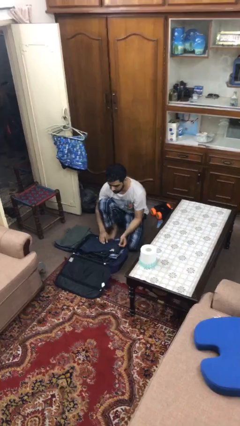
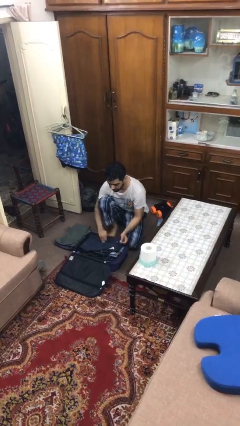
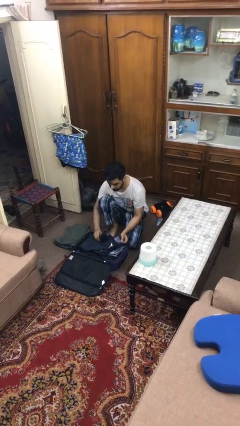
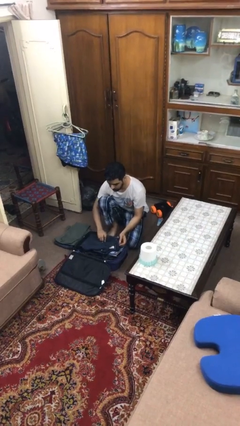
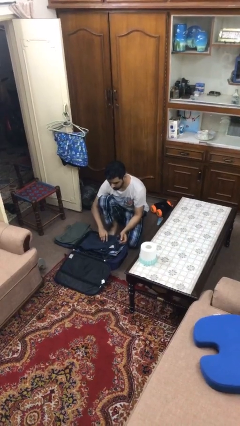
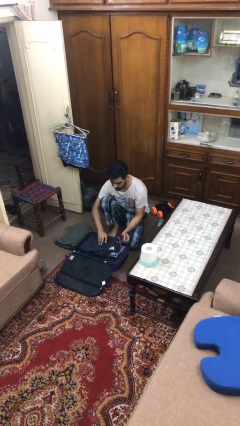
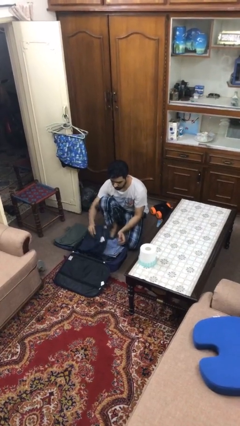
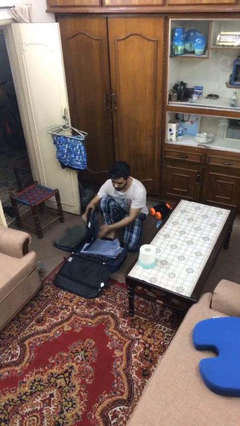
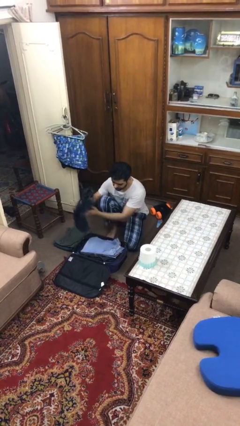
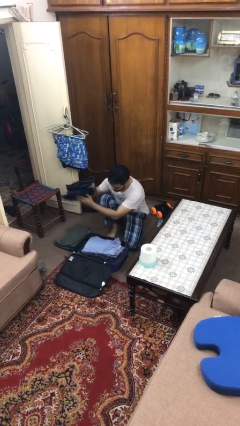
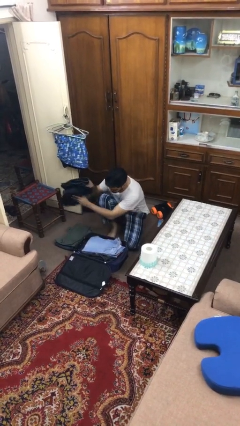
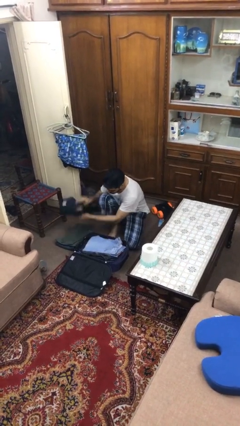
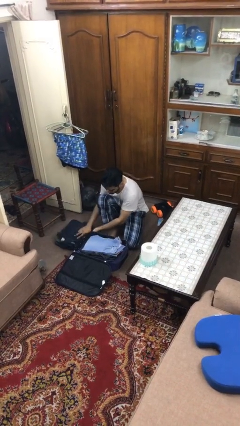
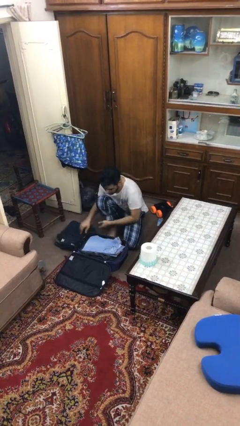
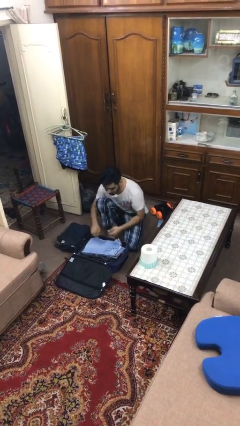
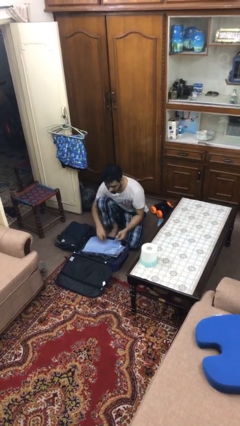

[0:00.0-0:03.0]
person unloads clothes from suitcase

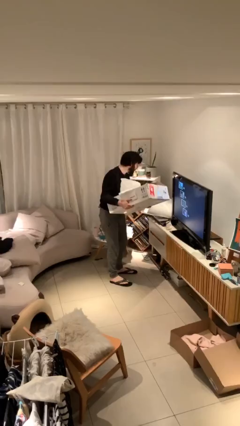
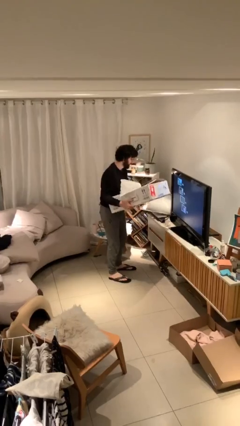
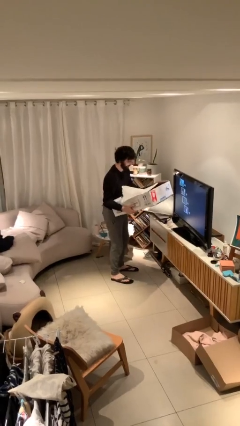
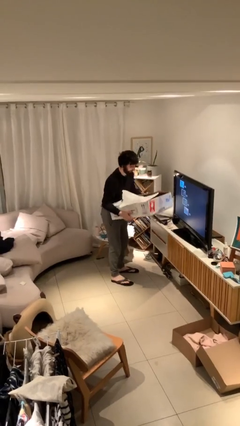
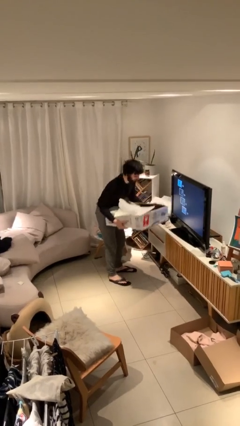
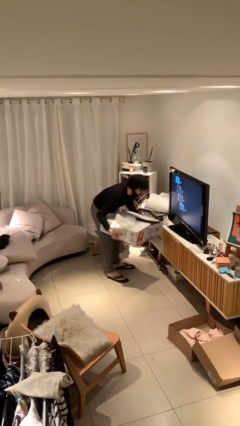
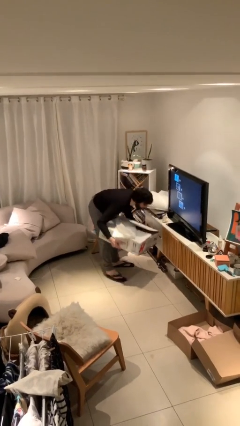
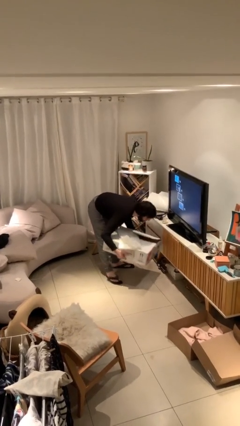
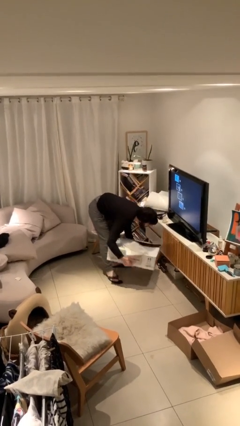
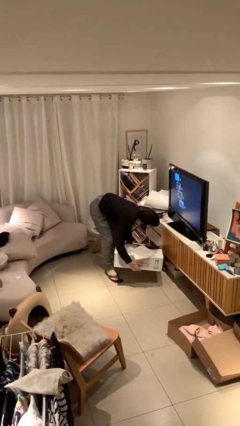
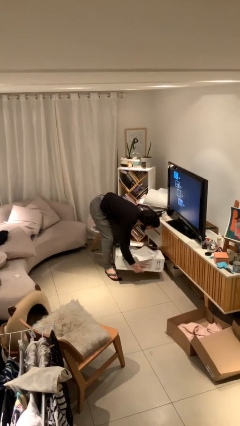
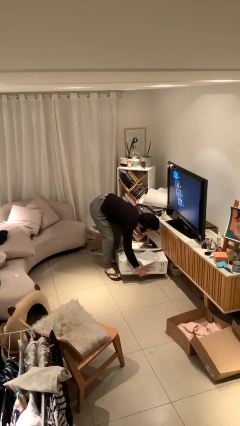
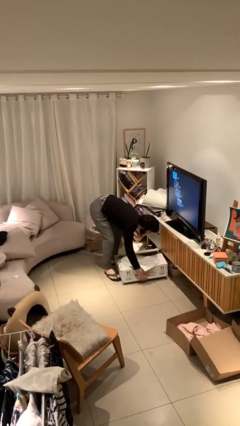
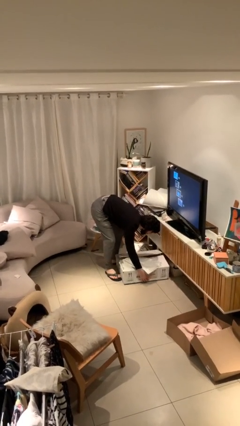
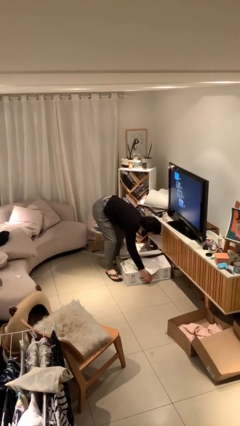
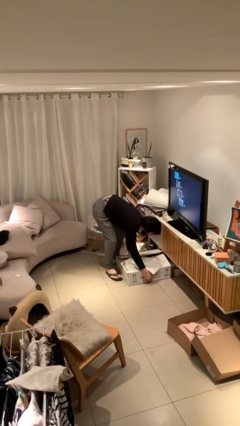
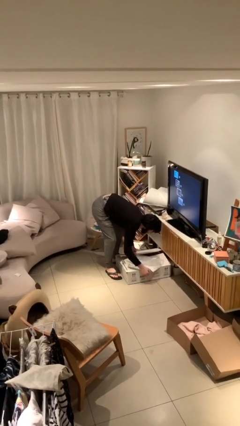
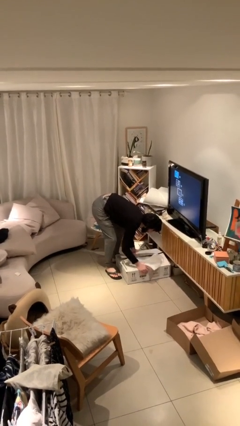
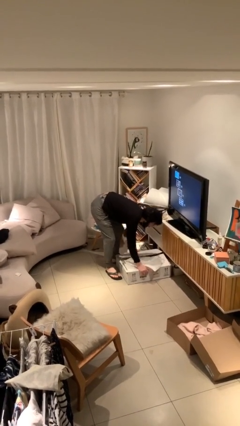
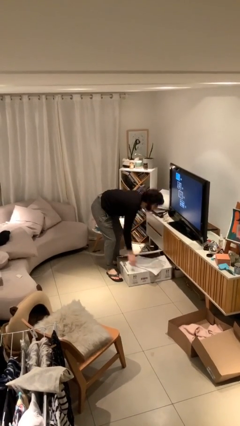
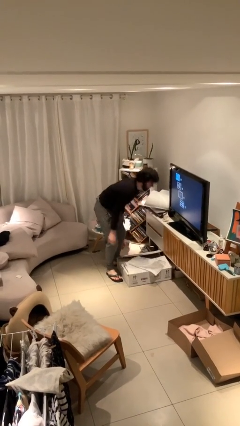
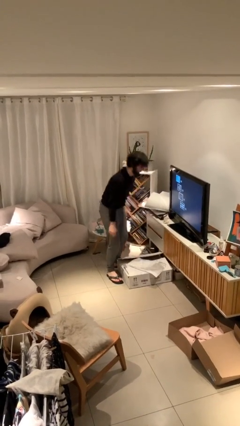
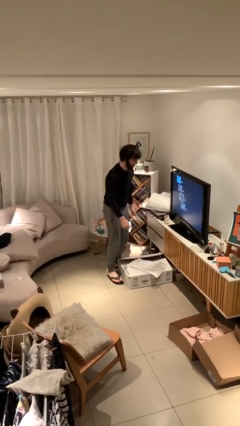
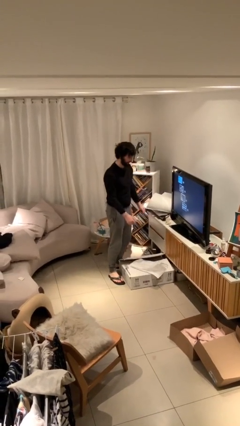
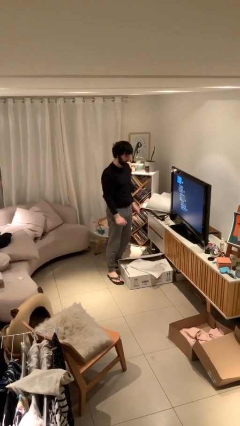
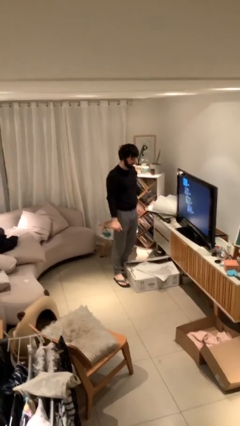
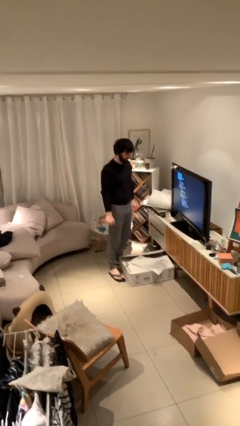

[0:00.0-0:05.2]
person puts down object on floor

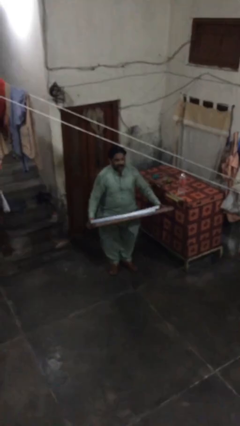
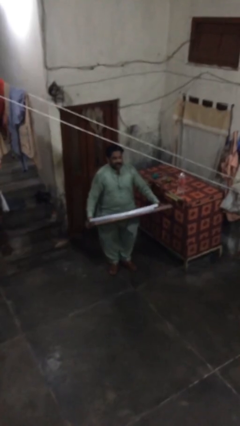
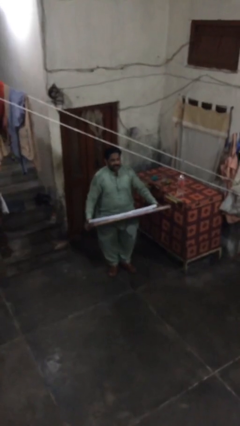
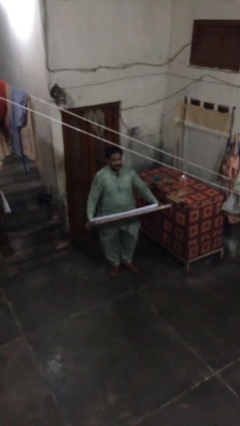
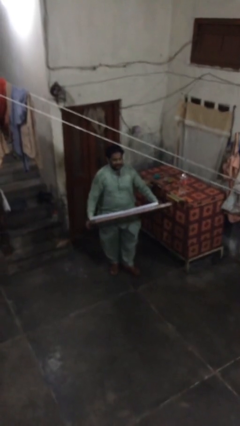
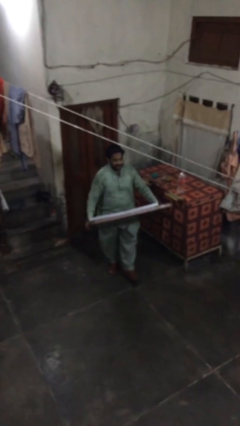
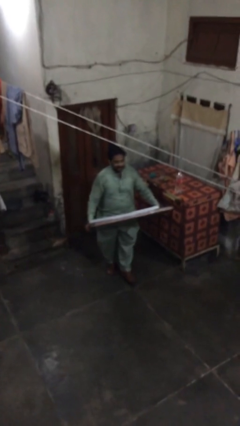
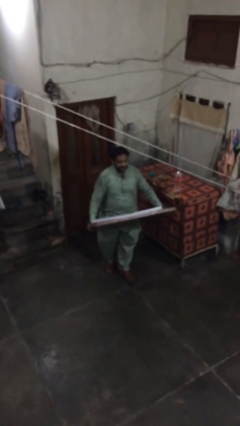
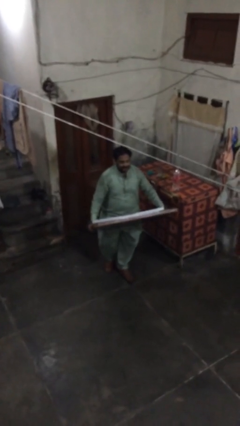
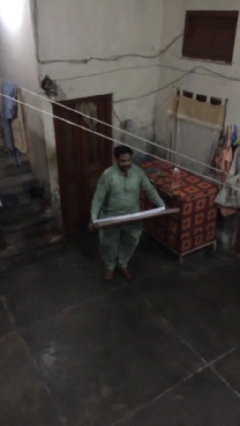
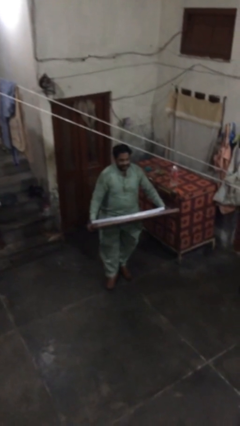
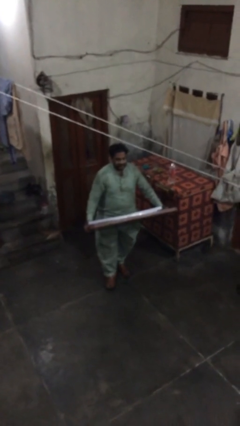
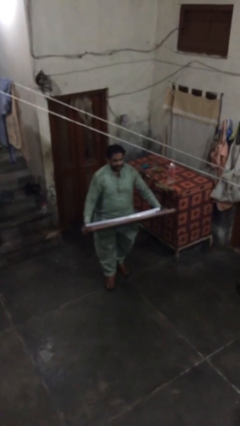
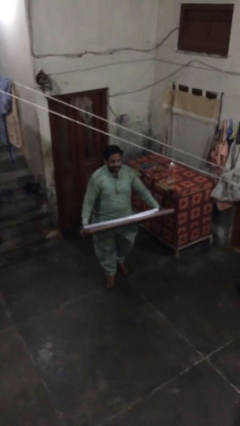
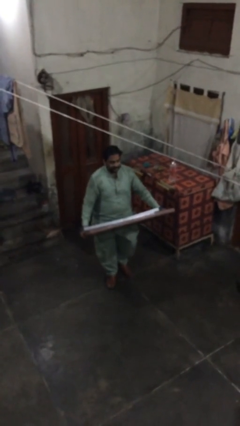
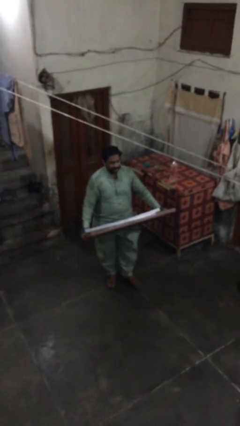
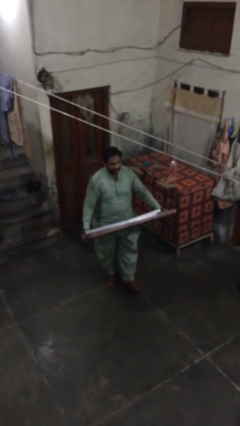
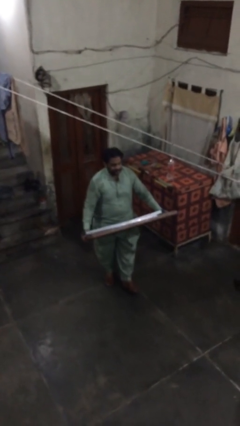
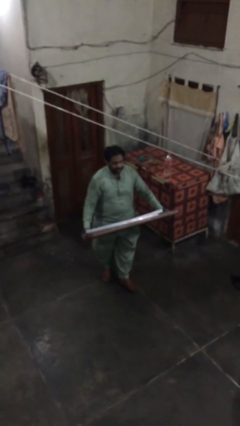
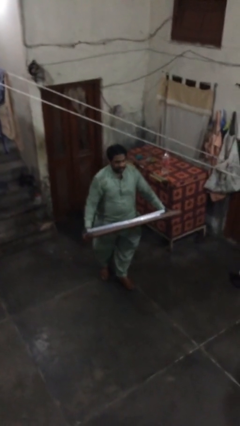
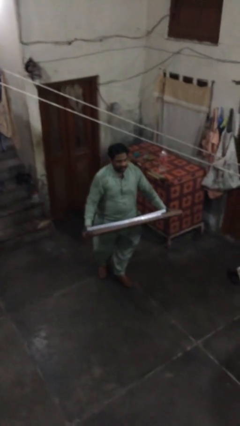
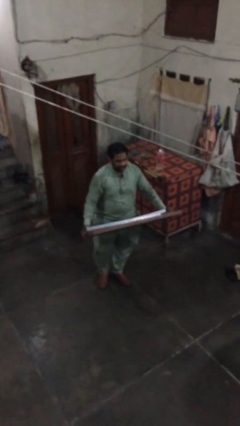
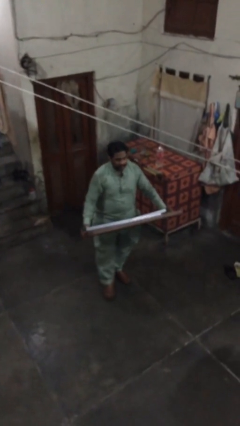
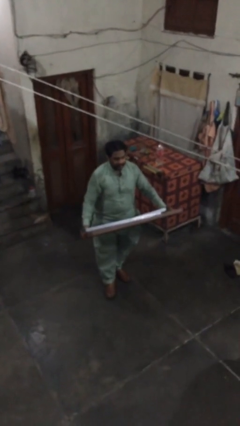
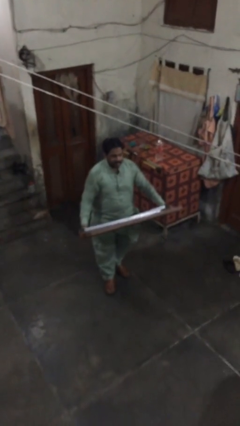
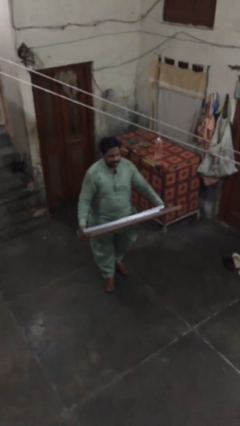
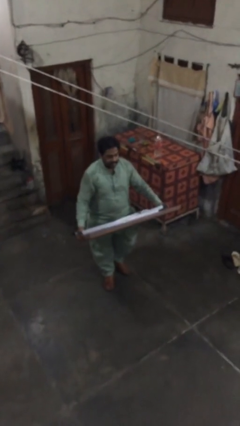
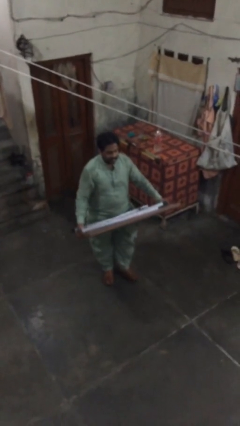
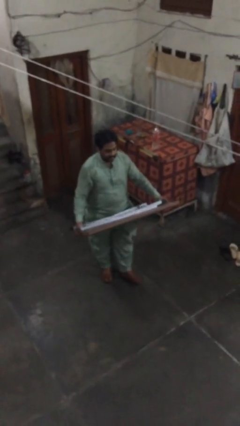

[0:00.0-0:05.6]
person carries heavy object

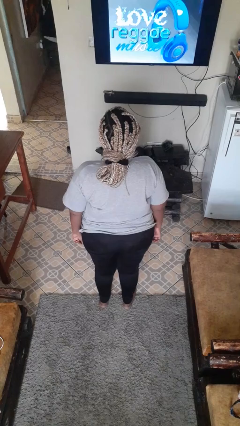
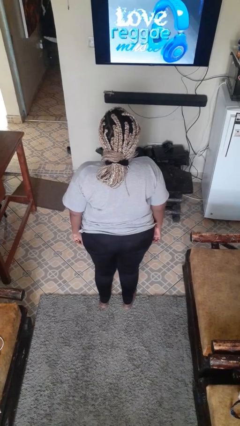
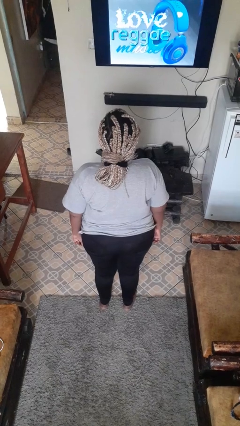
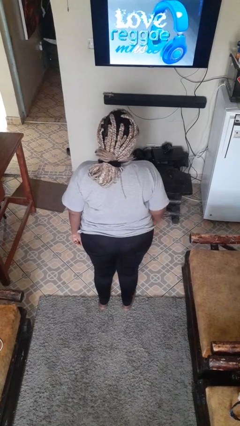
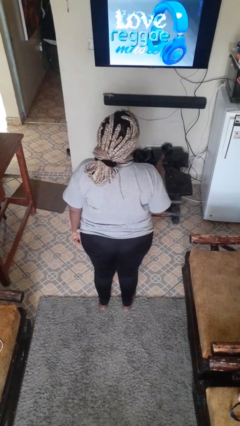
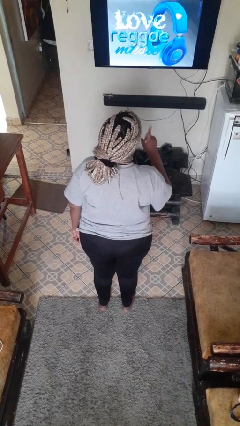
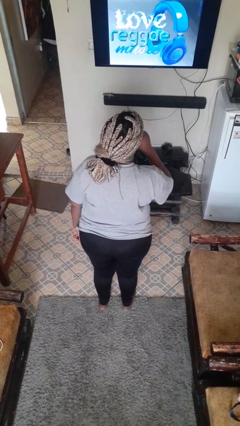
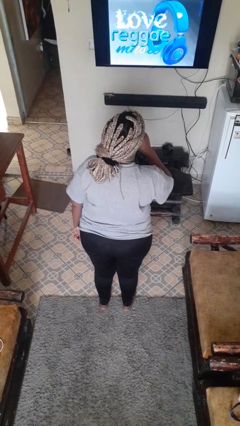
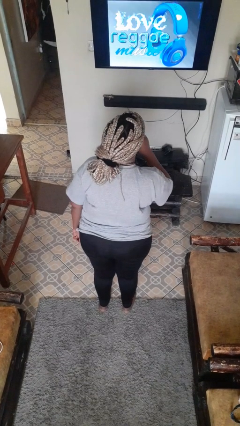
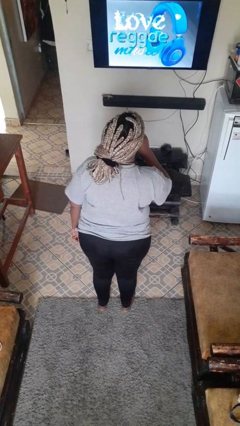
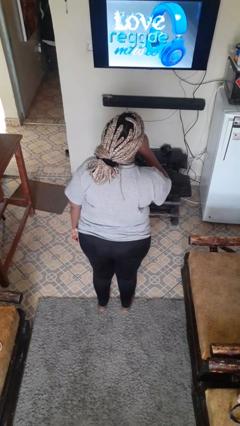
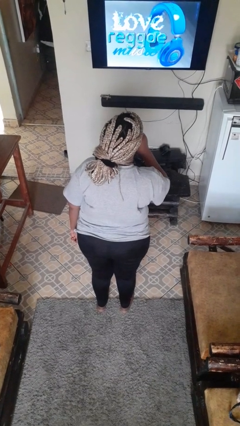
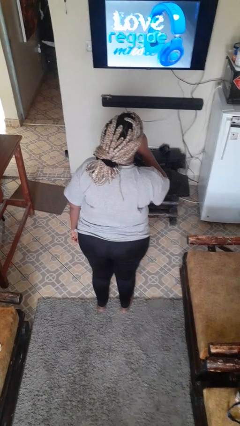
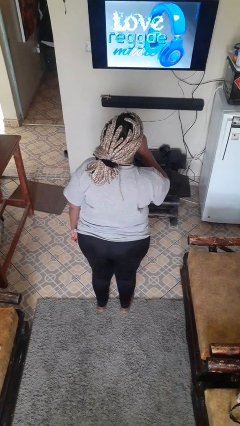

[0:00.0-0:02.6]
person gestures be quiet

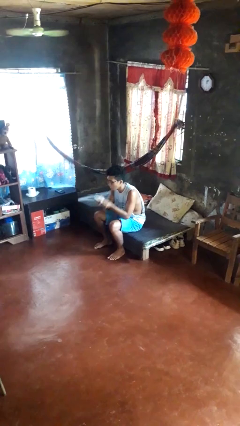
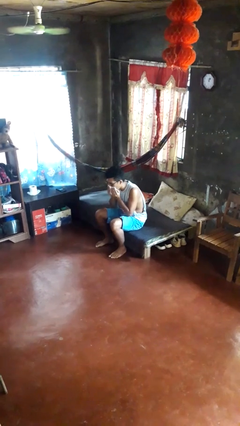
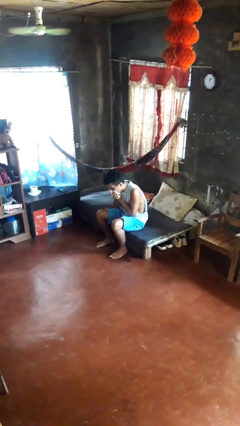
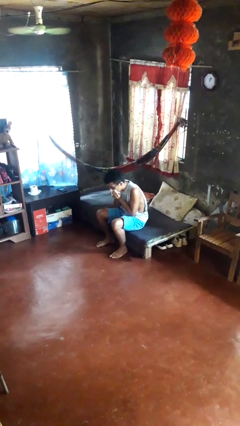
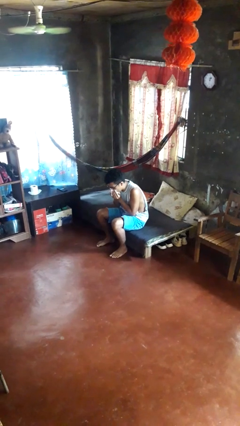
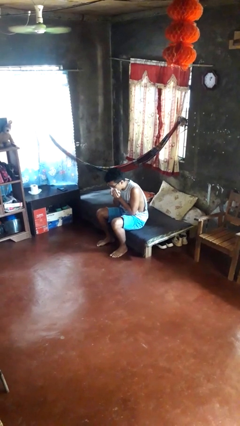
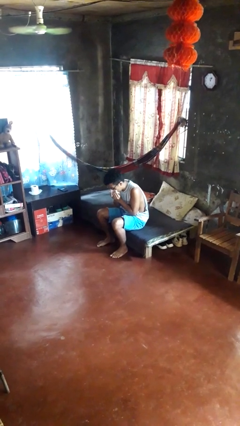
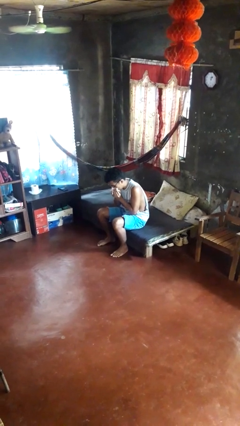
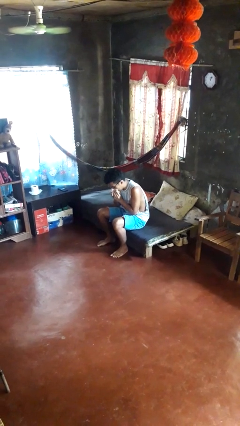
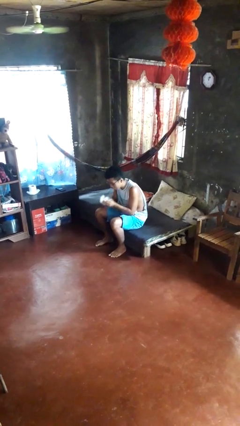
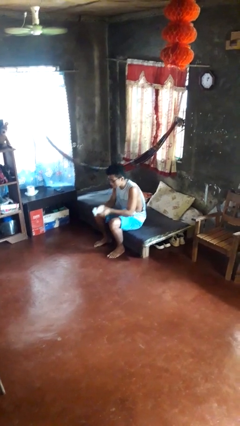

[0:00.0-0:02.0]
person blows nose
